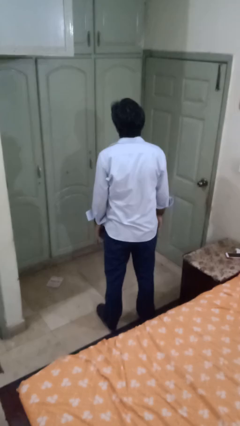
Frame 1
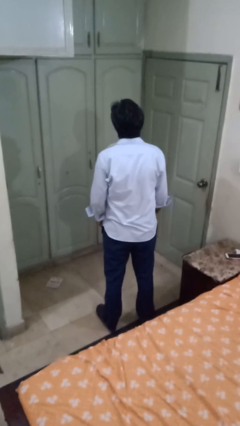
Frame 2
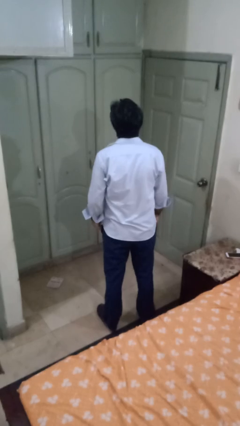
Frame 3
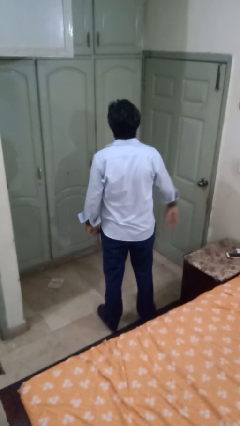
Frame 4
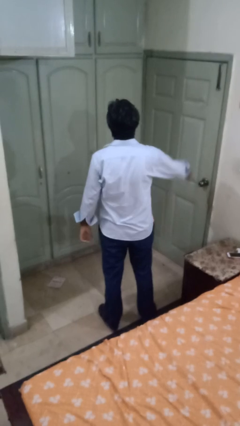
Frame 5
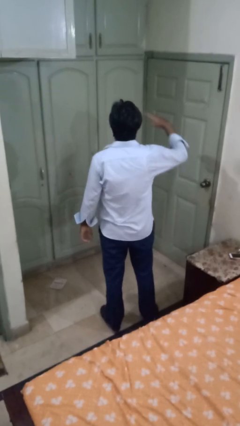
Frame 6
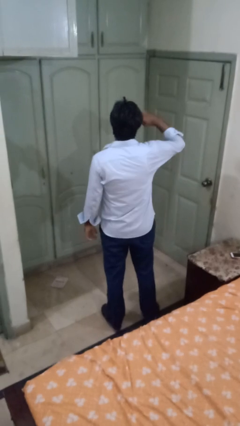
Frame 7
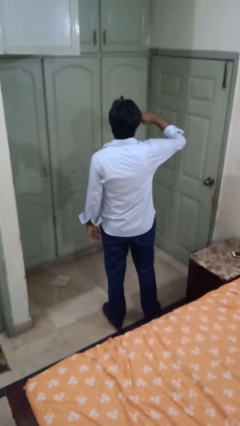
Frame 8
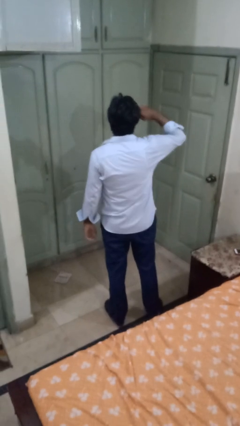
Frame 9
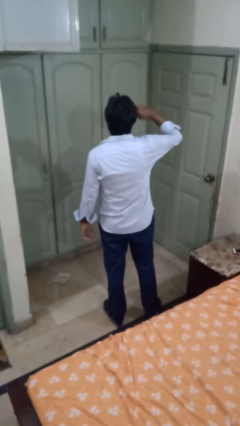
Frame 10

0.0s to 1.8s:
person salutes

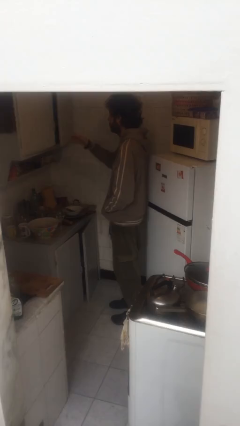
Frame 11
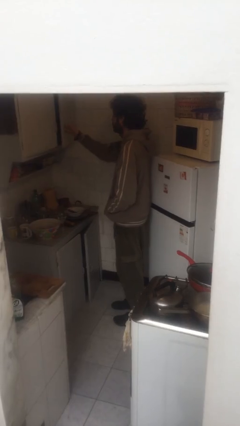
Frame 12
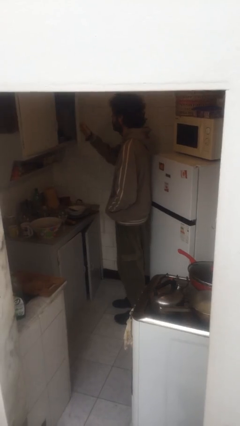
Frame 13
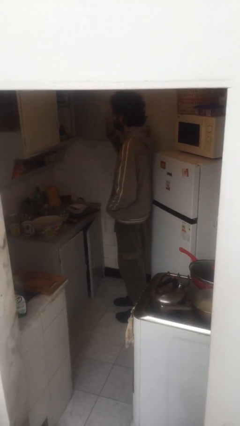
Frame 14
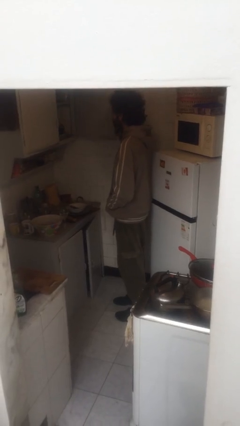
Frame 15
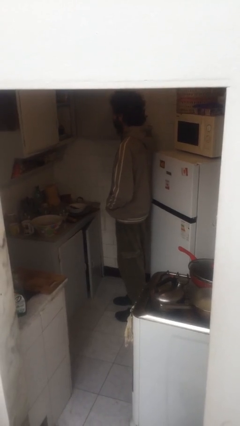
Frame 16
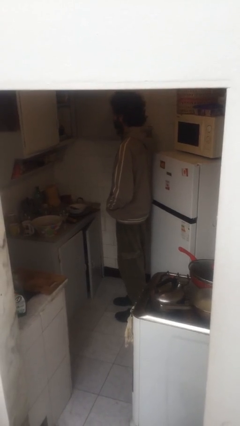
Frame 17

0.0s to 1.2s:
person opens cabinet

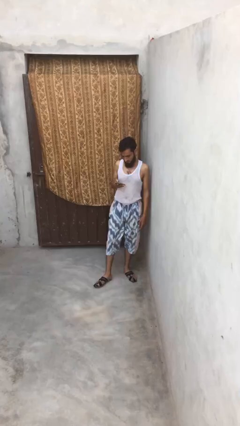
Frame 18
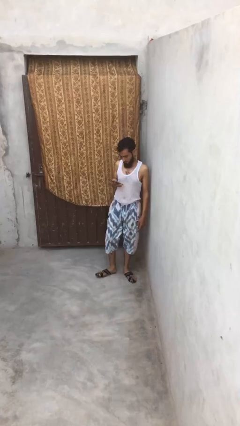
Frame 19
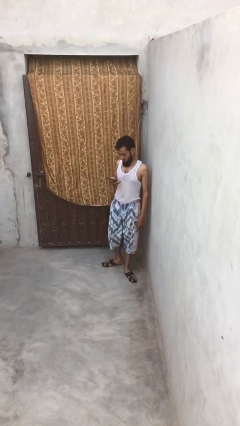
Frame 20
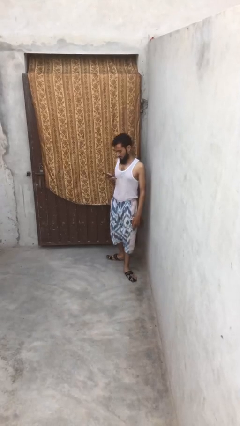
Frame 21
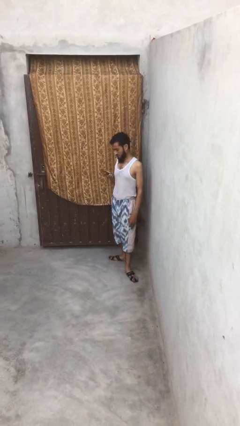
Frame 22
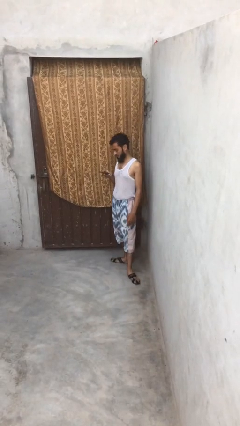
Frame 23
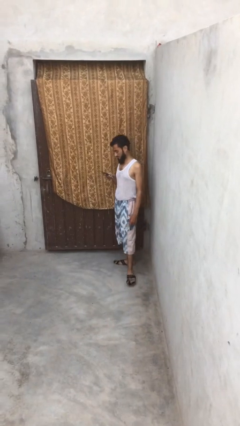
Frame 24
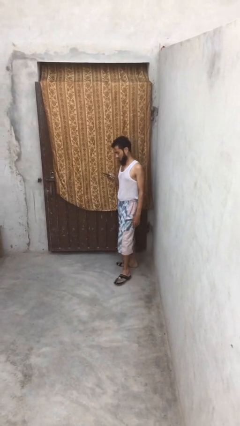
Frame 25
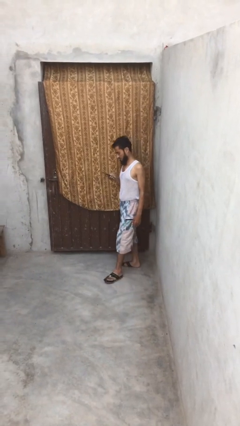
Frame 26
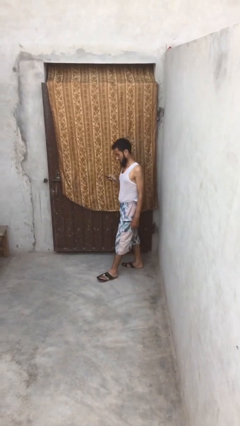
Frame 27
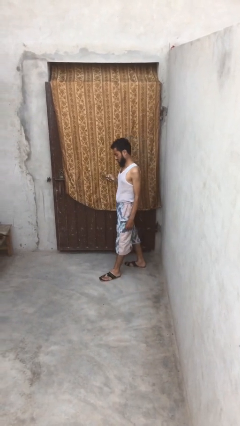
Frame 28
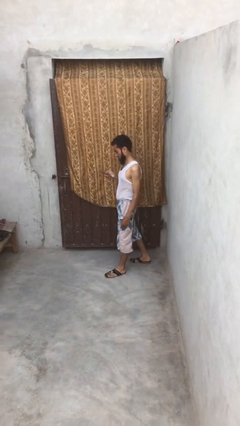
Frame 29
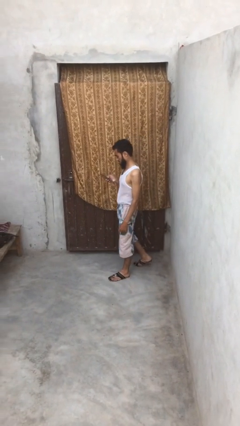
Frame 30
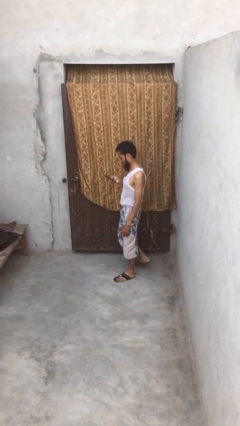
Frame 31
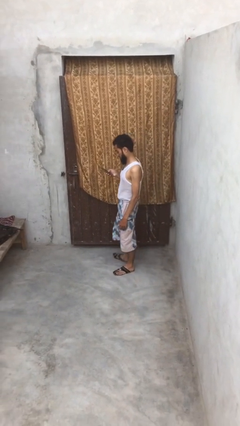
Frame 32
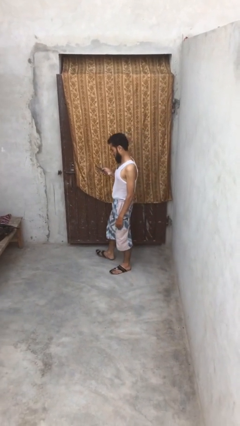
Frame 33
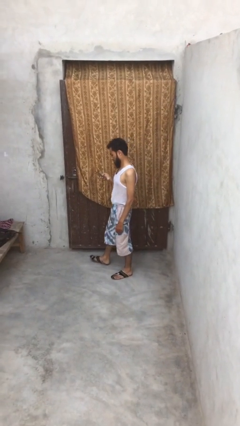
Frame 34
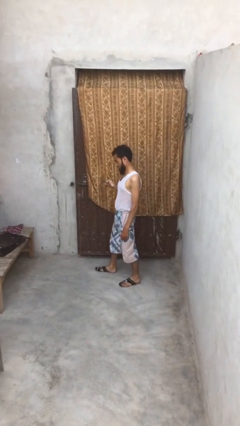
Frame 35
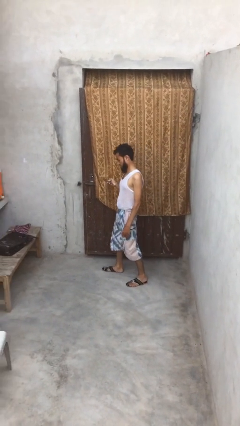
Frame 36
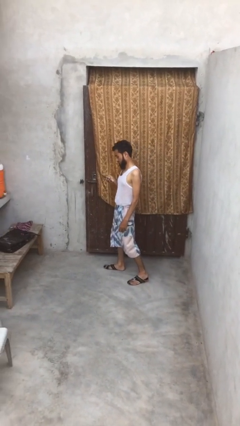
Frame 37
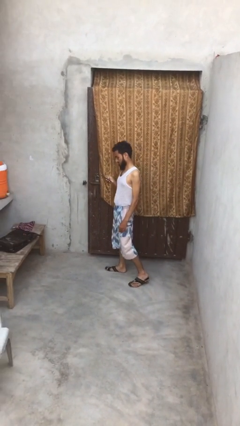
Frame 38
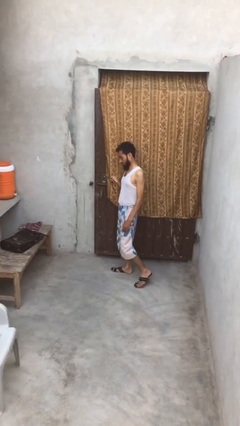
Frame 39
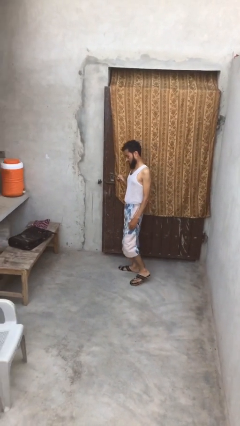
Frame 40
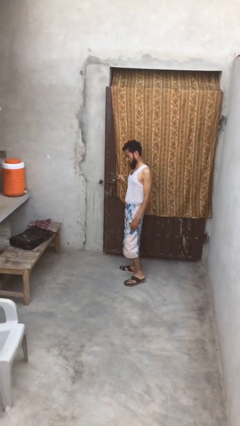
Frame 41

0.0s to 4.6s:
person texts on phone

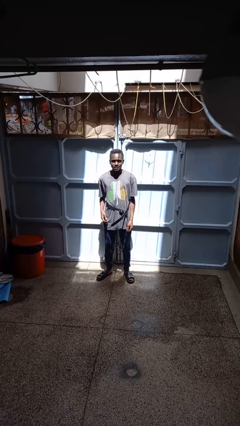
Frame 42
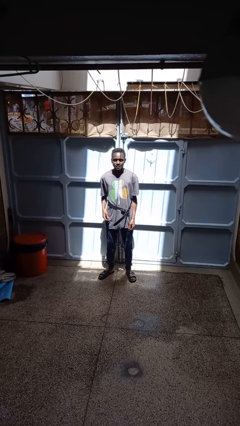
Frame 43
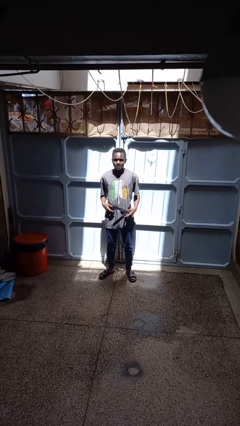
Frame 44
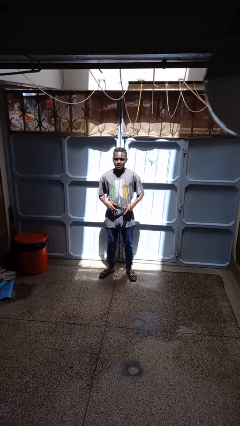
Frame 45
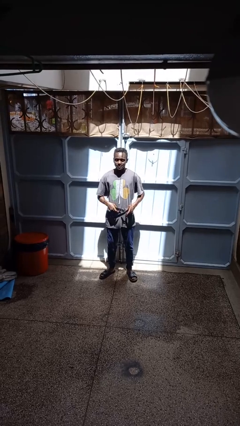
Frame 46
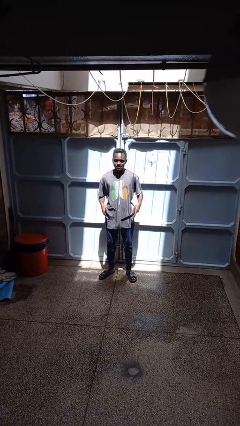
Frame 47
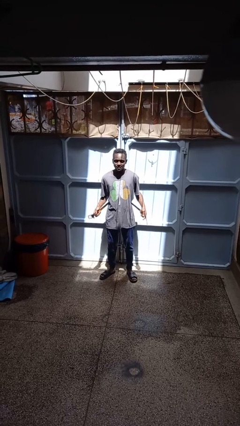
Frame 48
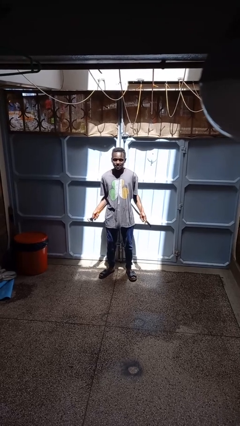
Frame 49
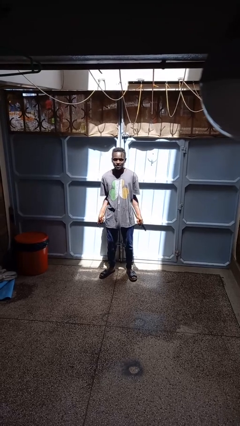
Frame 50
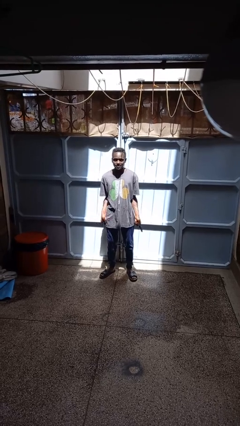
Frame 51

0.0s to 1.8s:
person takes off belt

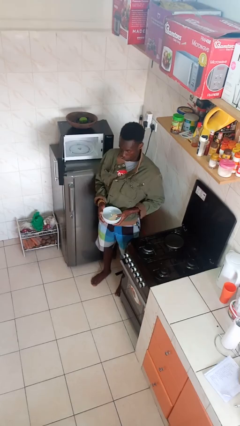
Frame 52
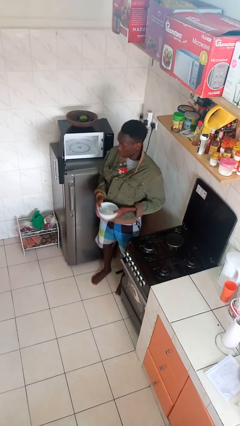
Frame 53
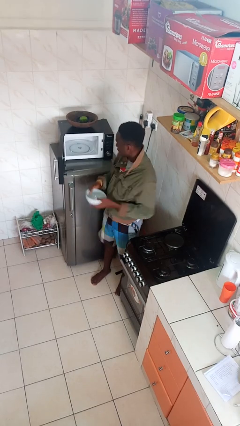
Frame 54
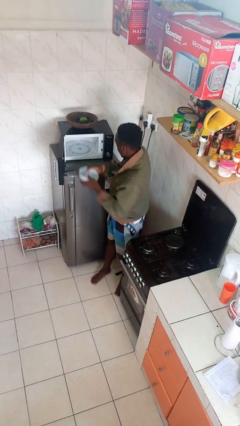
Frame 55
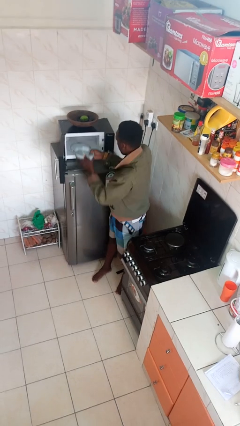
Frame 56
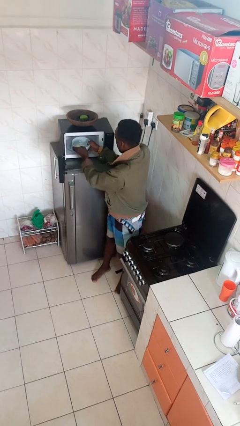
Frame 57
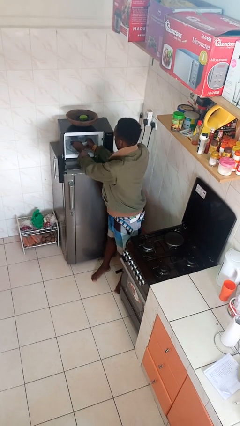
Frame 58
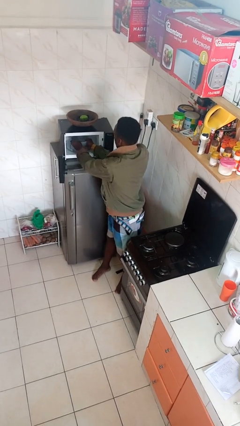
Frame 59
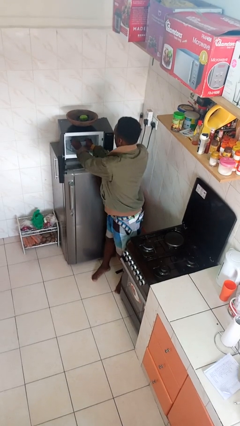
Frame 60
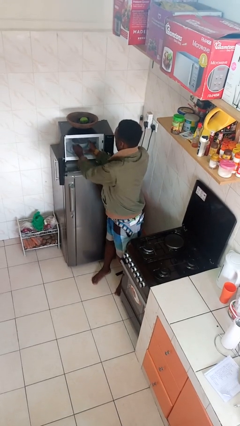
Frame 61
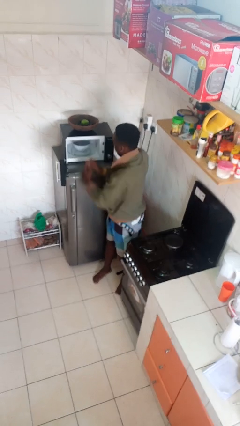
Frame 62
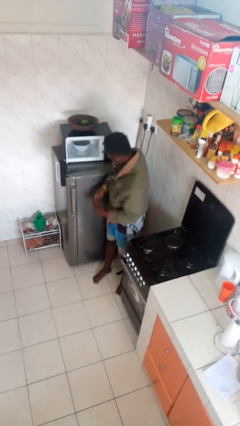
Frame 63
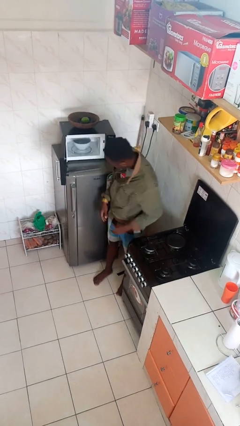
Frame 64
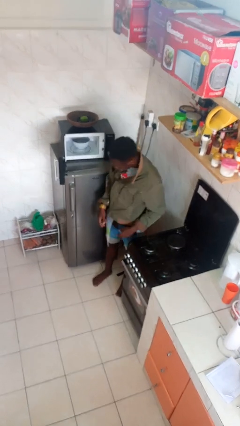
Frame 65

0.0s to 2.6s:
person puts object into microwave

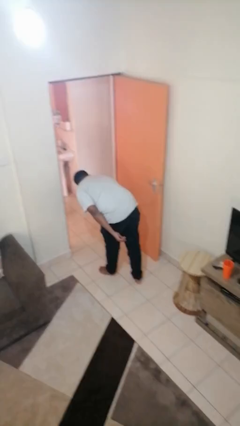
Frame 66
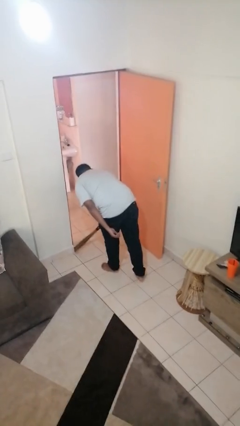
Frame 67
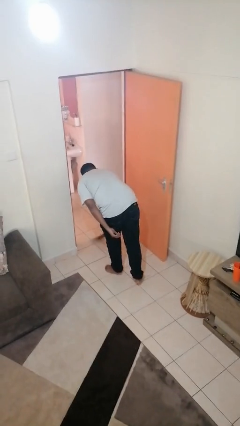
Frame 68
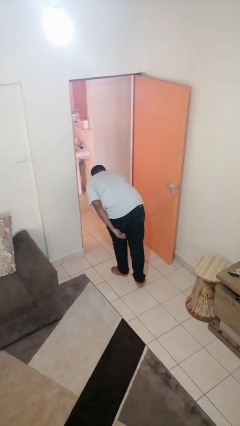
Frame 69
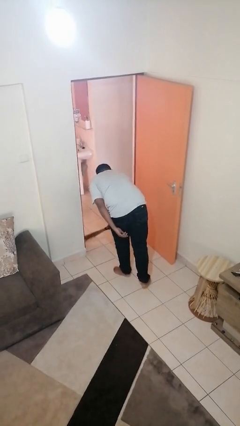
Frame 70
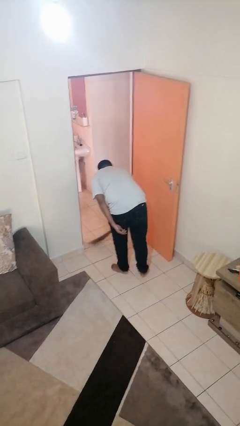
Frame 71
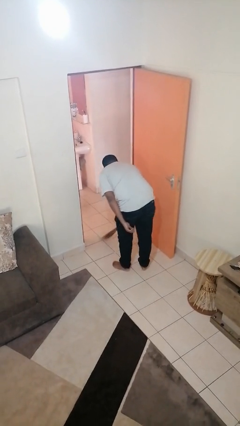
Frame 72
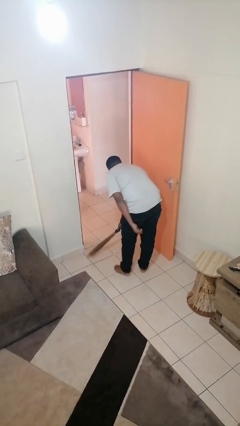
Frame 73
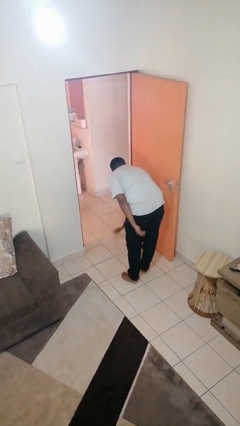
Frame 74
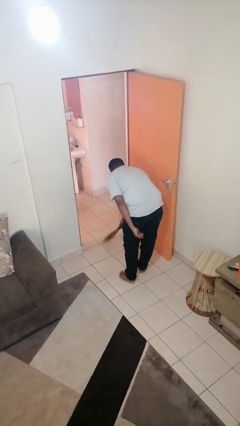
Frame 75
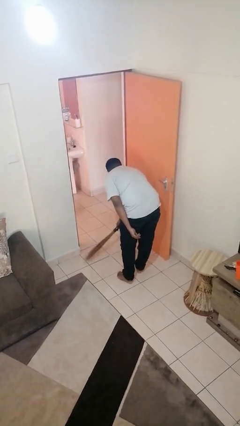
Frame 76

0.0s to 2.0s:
person sweeps floor

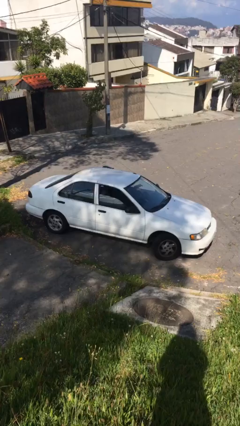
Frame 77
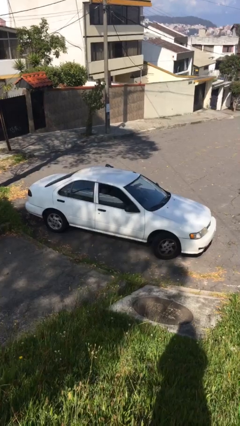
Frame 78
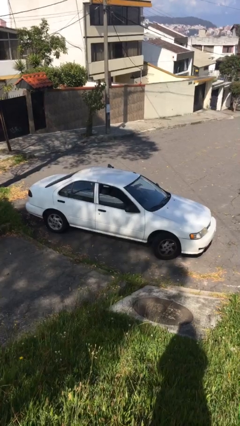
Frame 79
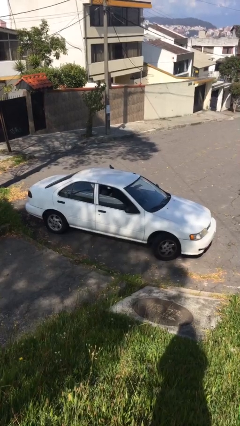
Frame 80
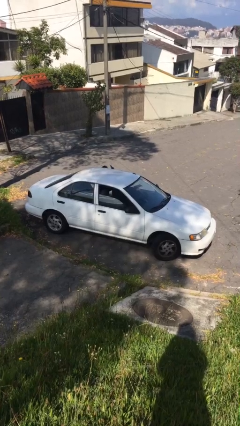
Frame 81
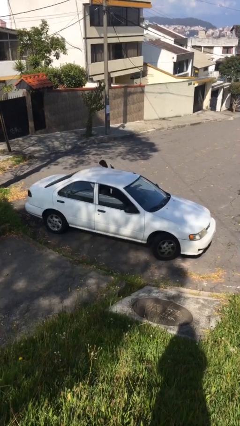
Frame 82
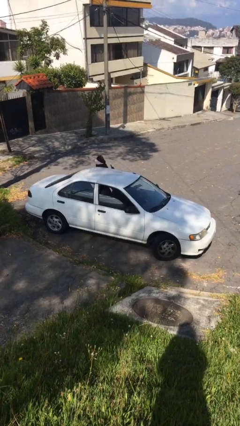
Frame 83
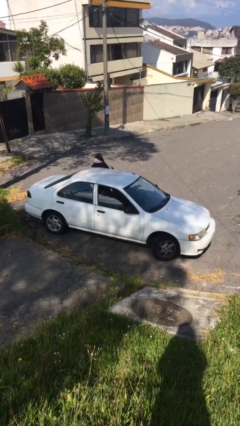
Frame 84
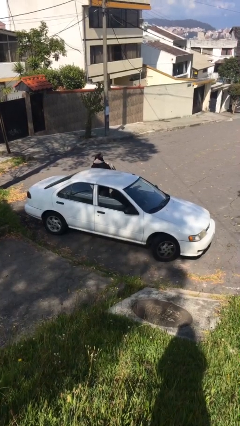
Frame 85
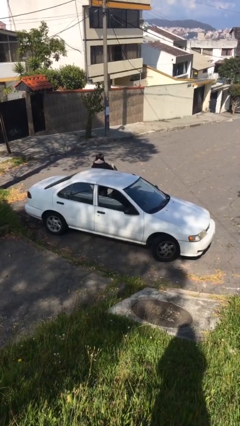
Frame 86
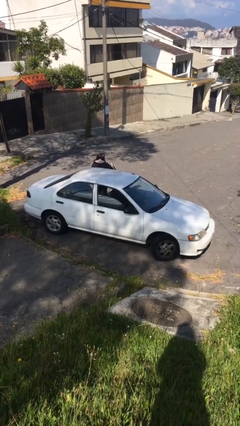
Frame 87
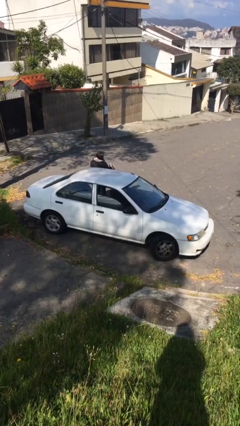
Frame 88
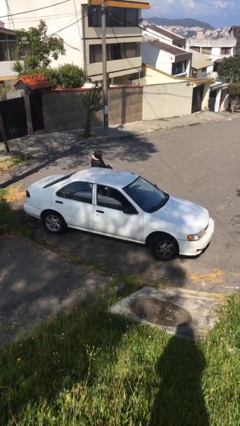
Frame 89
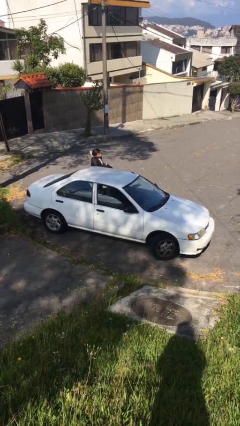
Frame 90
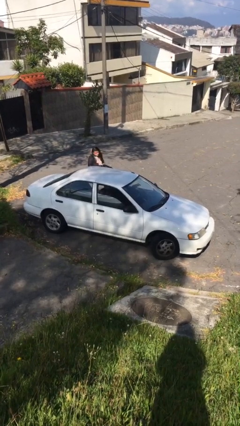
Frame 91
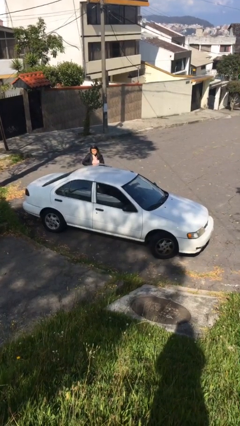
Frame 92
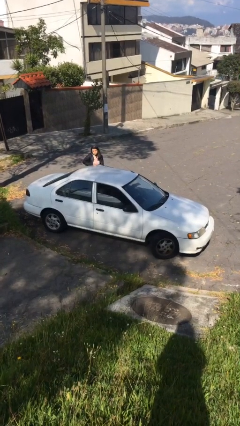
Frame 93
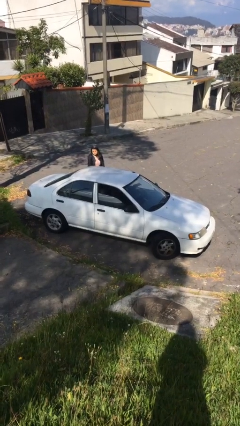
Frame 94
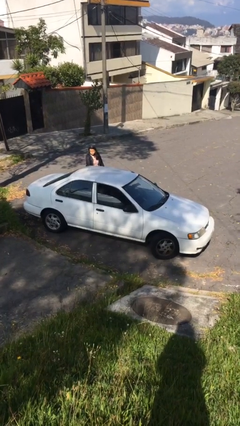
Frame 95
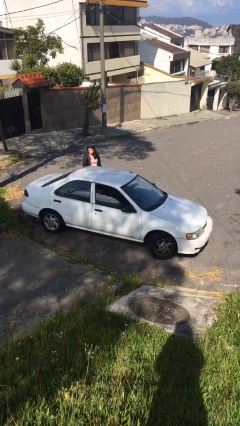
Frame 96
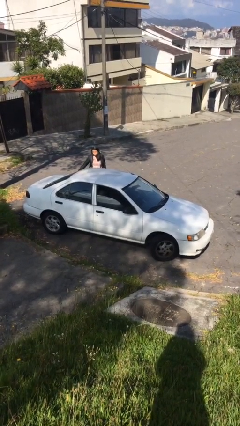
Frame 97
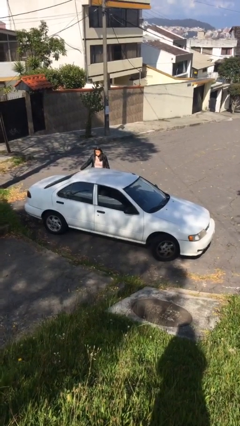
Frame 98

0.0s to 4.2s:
car drops off person
